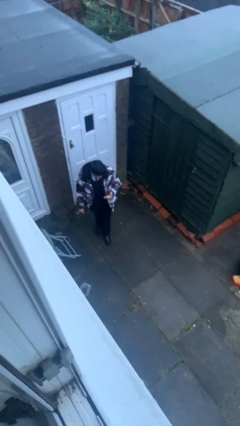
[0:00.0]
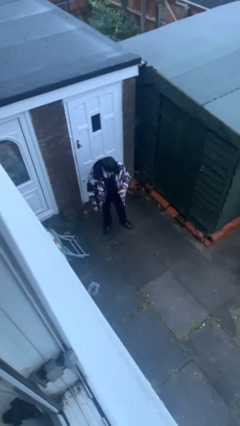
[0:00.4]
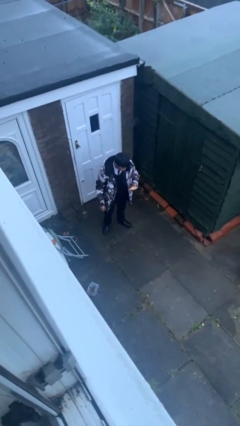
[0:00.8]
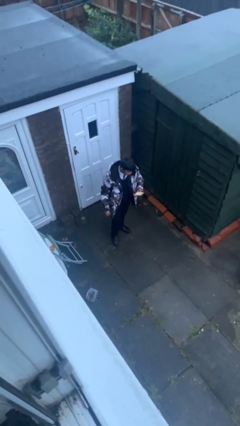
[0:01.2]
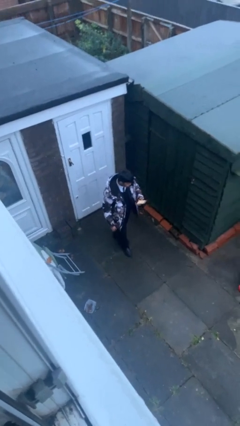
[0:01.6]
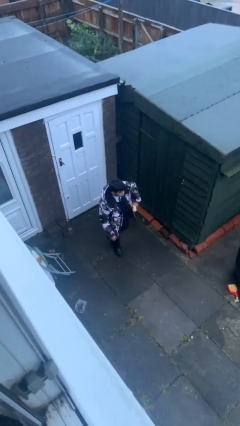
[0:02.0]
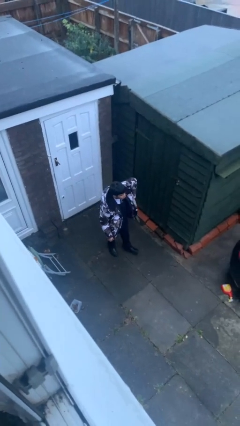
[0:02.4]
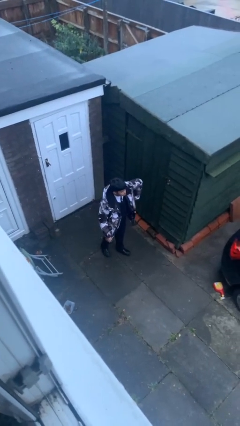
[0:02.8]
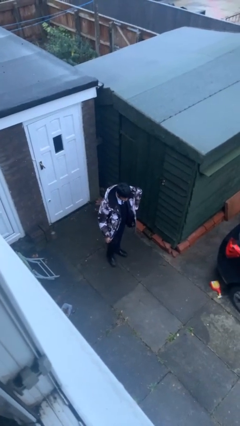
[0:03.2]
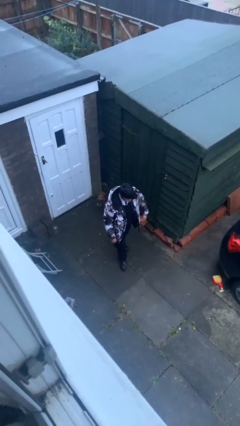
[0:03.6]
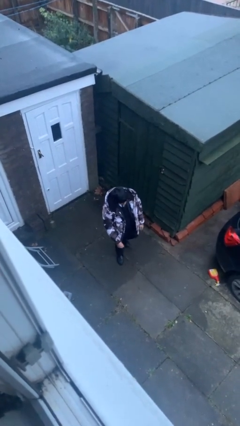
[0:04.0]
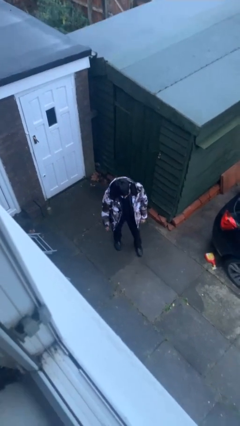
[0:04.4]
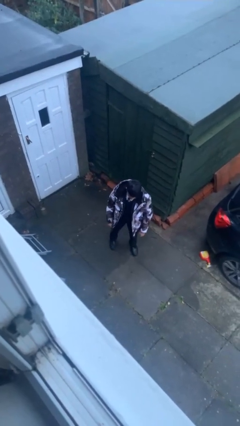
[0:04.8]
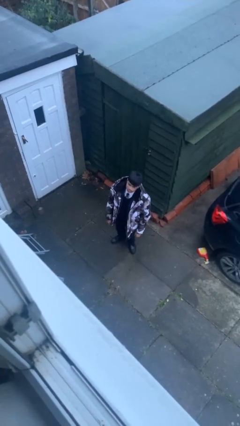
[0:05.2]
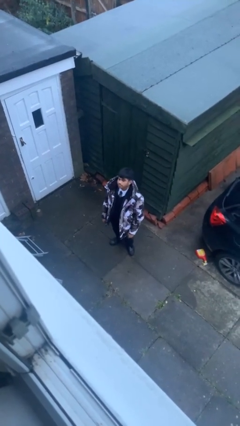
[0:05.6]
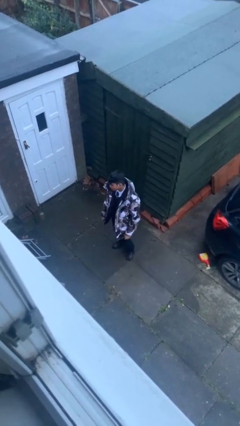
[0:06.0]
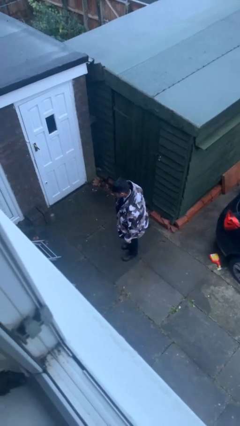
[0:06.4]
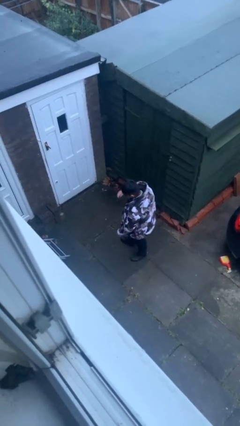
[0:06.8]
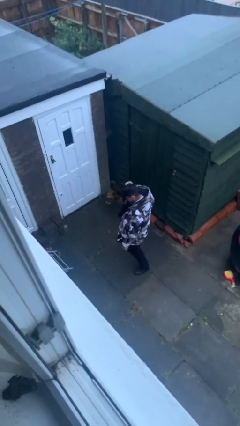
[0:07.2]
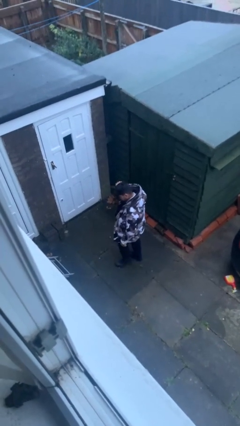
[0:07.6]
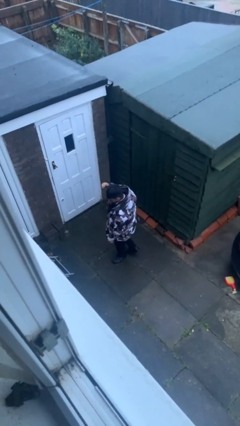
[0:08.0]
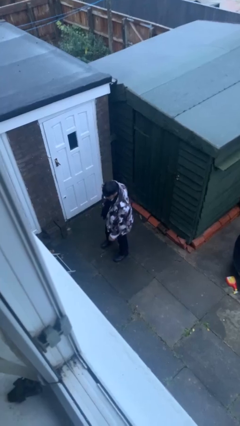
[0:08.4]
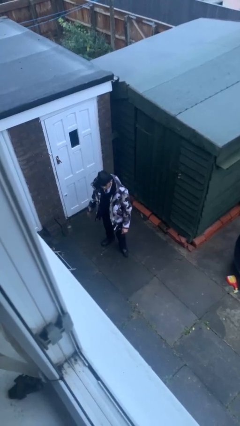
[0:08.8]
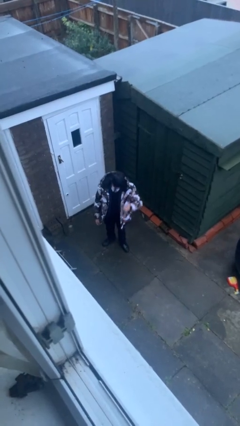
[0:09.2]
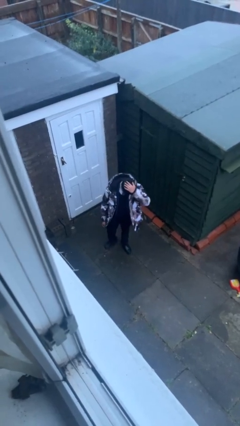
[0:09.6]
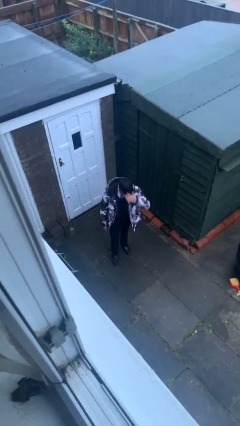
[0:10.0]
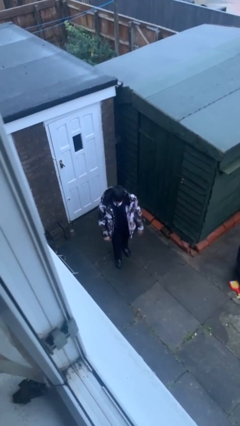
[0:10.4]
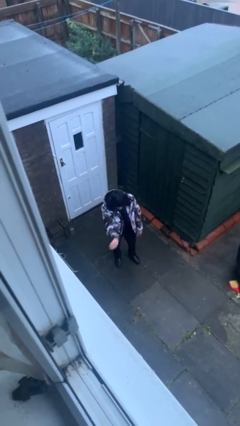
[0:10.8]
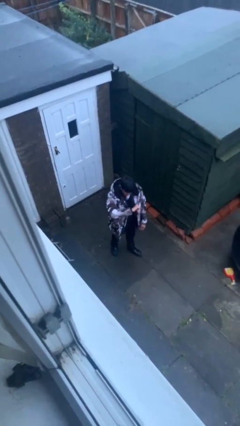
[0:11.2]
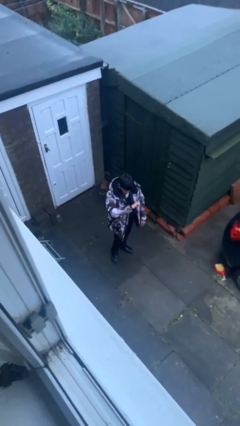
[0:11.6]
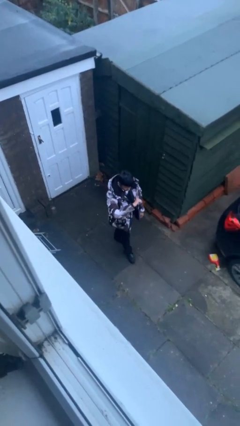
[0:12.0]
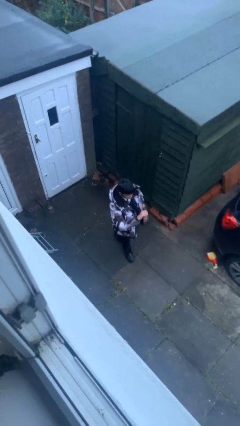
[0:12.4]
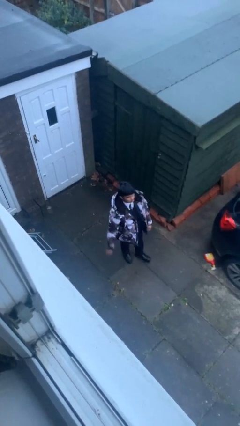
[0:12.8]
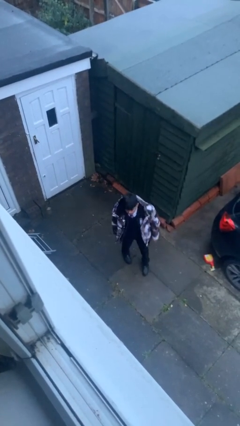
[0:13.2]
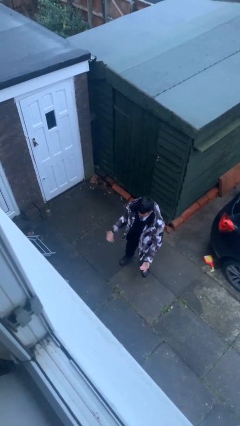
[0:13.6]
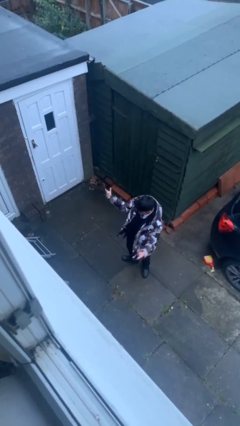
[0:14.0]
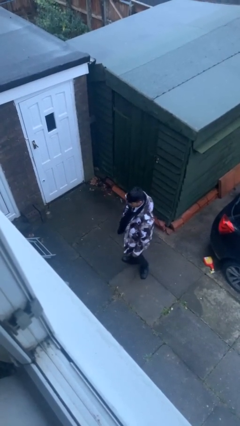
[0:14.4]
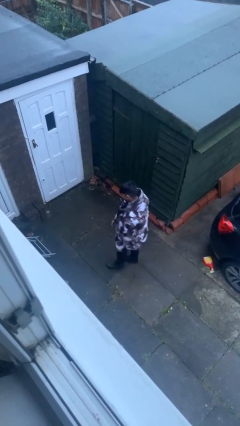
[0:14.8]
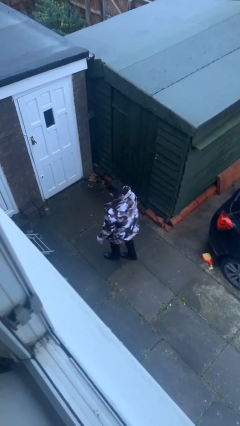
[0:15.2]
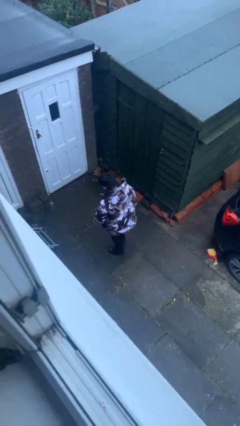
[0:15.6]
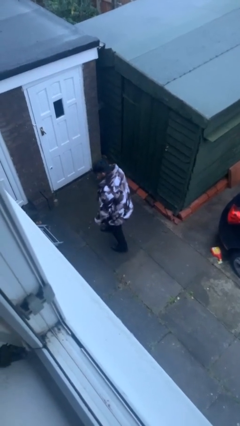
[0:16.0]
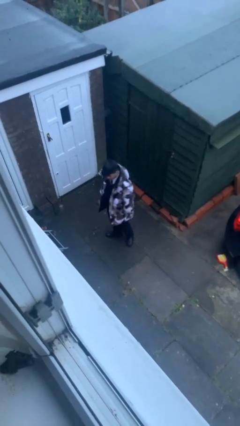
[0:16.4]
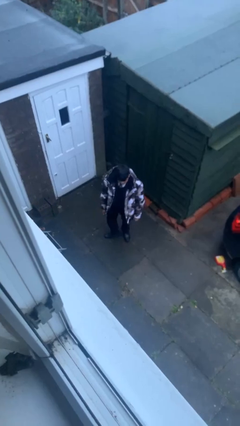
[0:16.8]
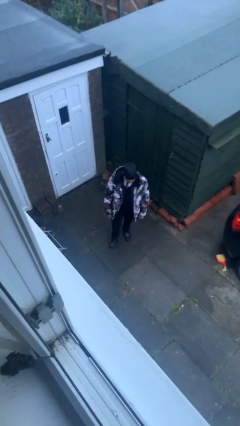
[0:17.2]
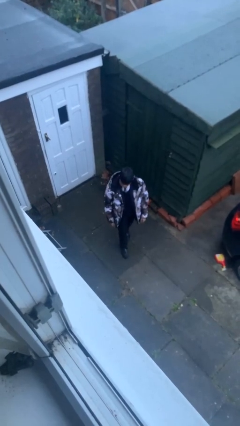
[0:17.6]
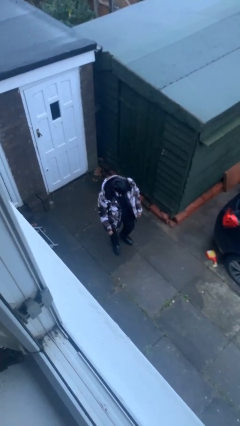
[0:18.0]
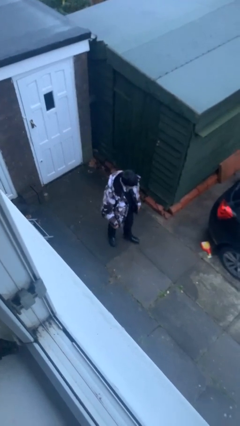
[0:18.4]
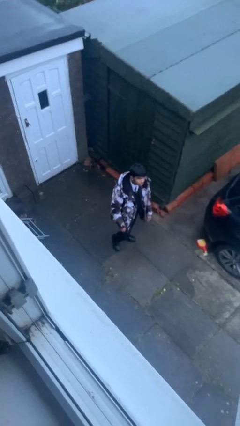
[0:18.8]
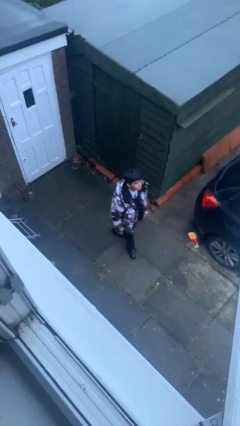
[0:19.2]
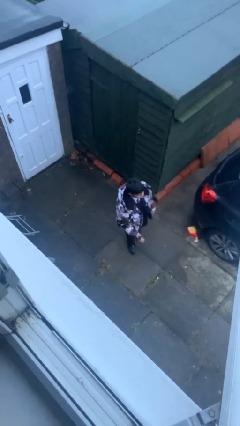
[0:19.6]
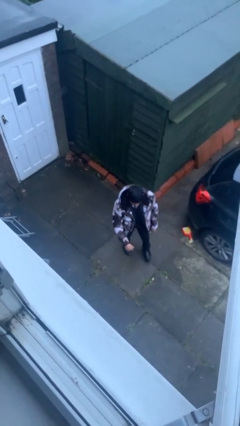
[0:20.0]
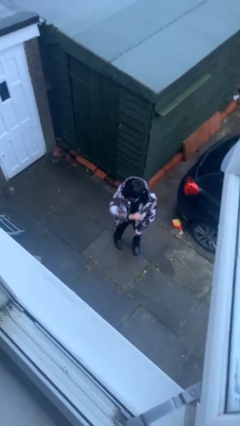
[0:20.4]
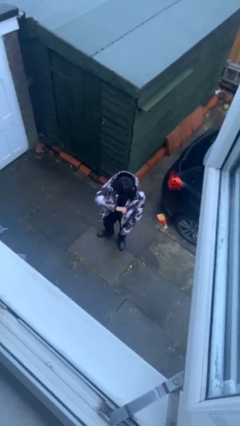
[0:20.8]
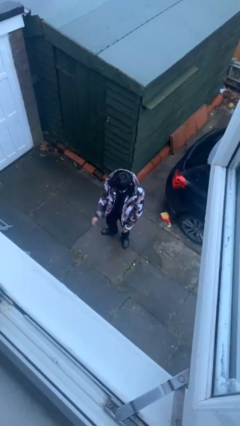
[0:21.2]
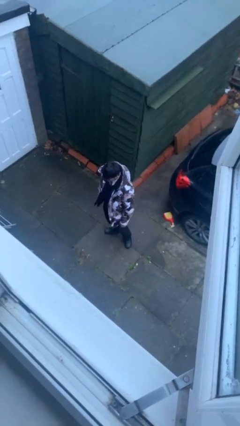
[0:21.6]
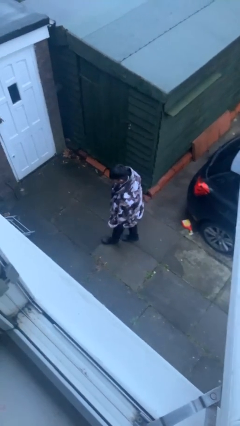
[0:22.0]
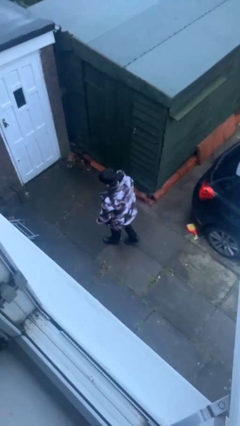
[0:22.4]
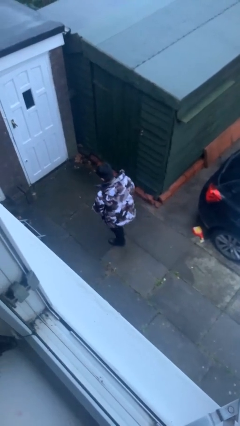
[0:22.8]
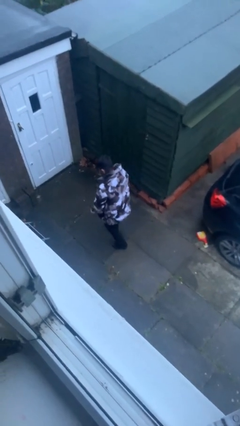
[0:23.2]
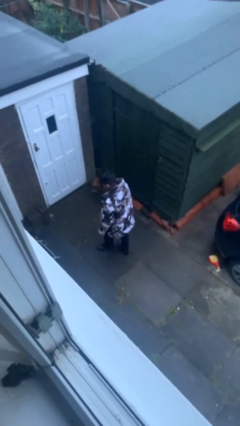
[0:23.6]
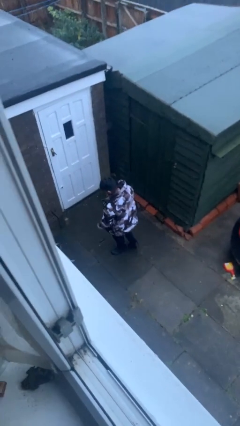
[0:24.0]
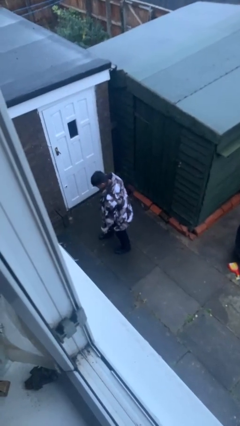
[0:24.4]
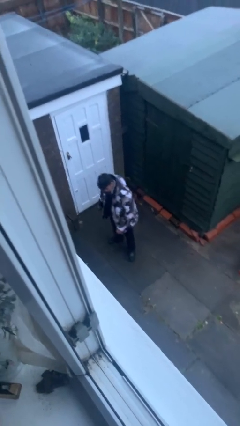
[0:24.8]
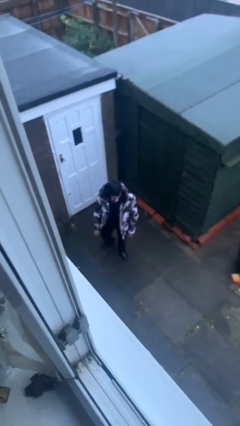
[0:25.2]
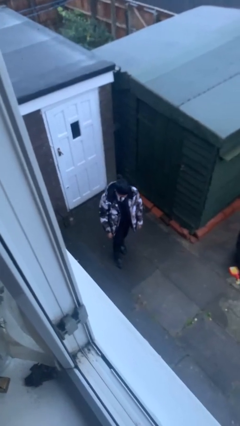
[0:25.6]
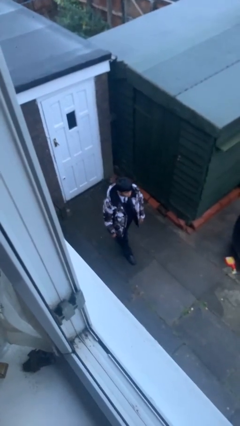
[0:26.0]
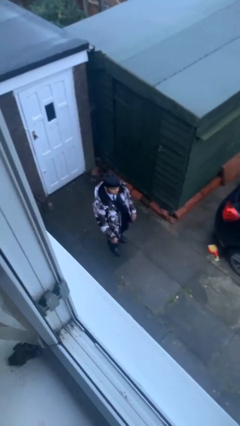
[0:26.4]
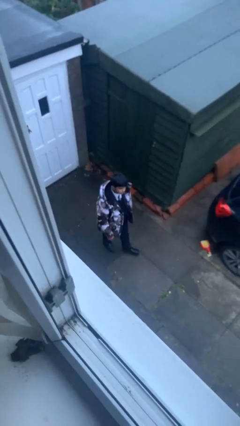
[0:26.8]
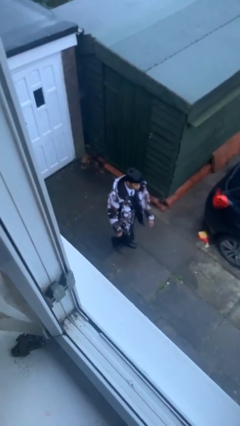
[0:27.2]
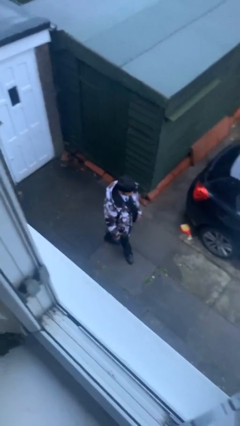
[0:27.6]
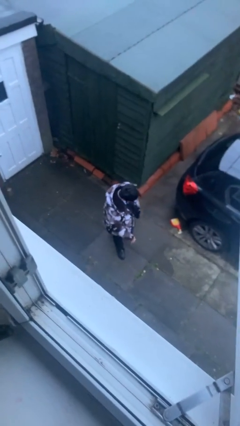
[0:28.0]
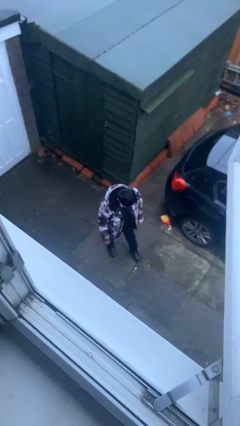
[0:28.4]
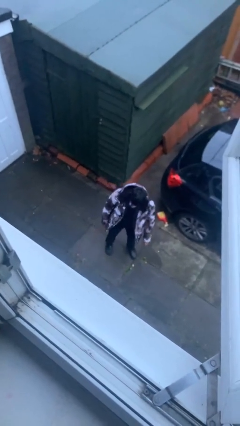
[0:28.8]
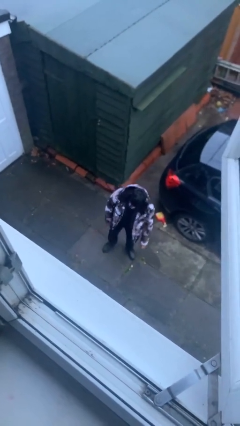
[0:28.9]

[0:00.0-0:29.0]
person walks

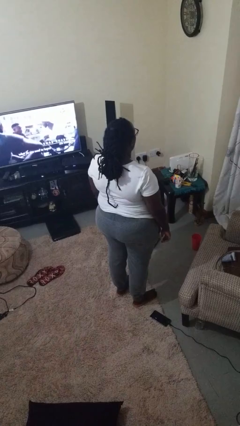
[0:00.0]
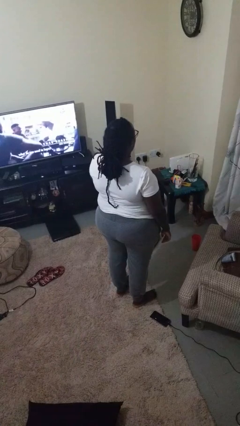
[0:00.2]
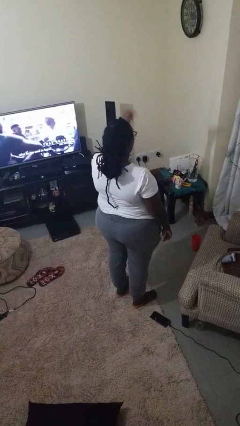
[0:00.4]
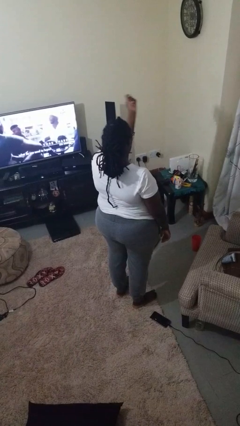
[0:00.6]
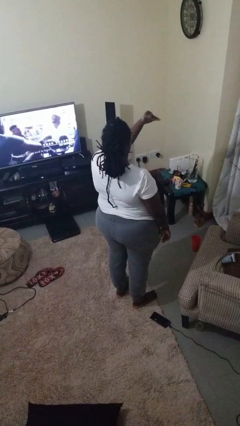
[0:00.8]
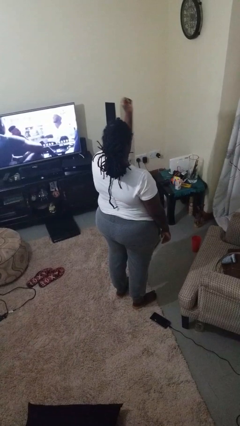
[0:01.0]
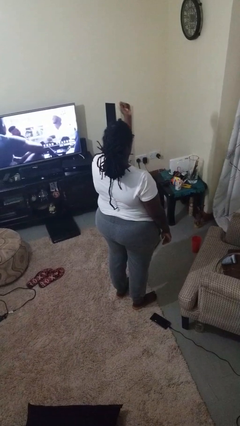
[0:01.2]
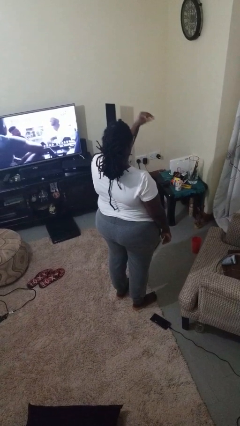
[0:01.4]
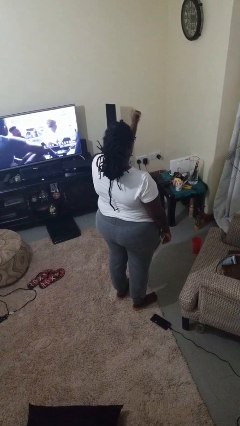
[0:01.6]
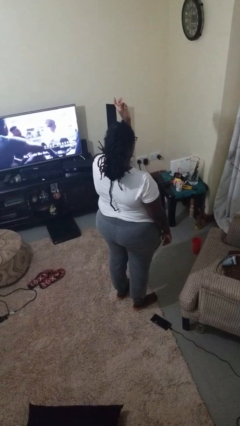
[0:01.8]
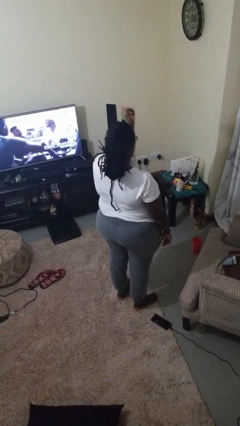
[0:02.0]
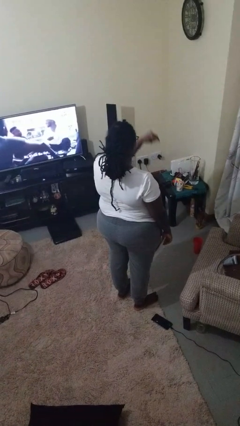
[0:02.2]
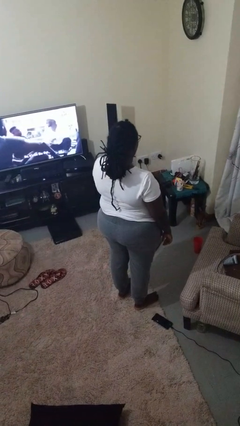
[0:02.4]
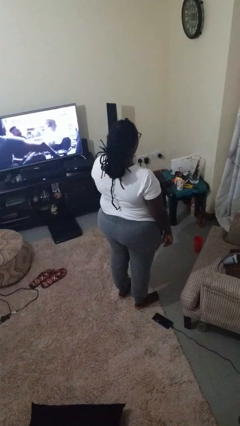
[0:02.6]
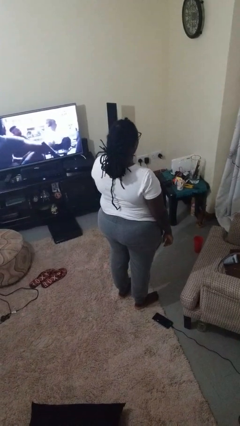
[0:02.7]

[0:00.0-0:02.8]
person snaps fingers

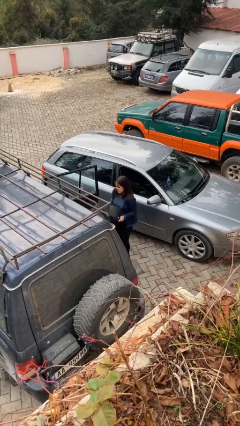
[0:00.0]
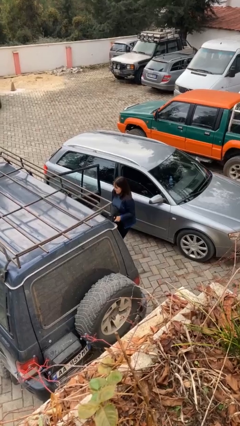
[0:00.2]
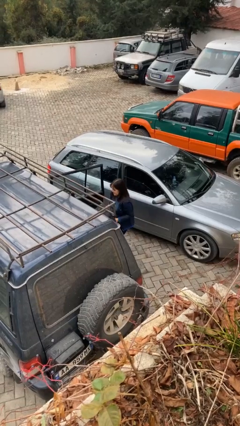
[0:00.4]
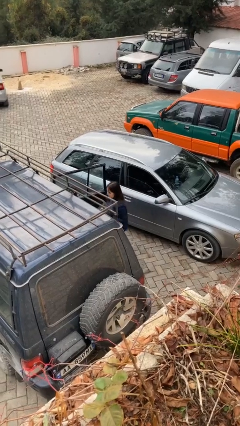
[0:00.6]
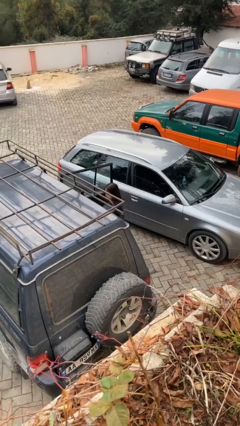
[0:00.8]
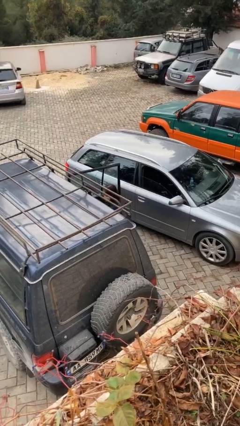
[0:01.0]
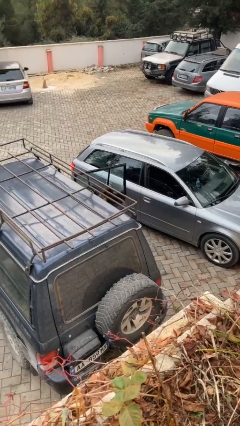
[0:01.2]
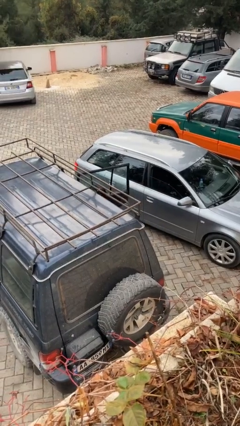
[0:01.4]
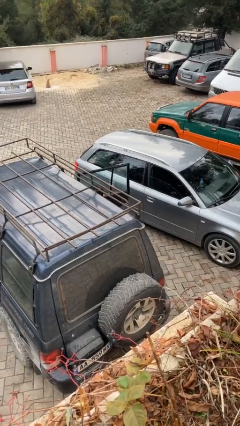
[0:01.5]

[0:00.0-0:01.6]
person loads car
